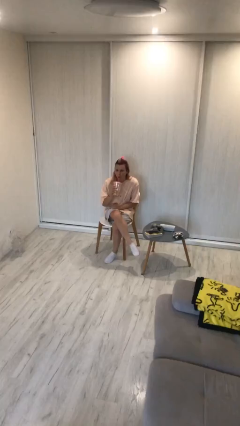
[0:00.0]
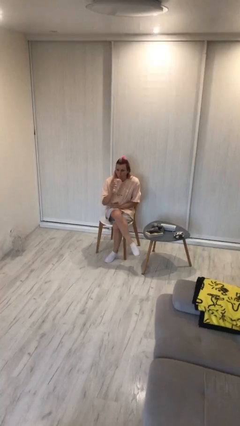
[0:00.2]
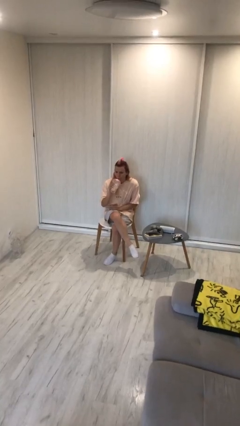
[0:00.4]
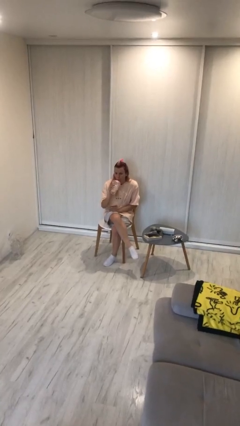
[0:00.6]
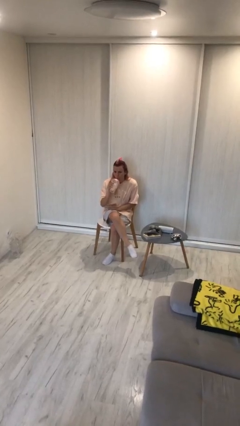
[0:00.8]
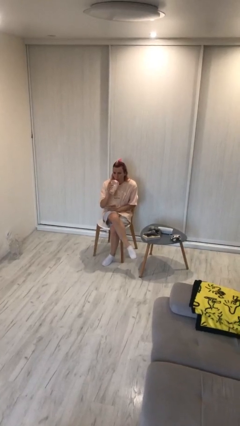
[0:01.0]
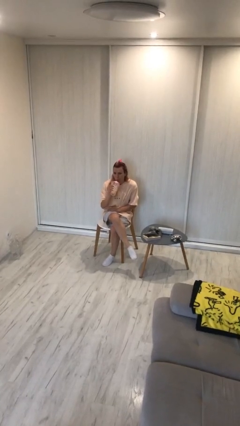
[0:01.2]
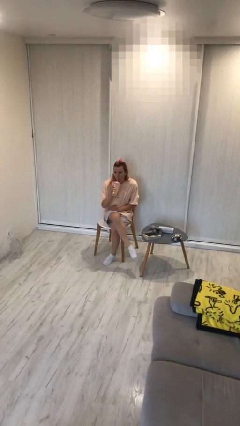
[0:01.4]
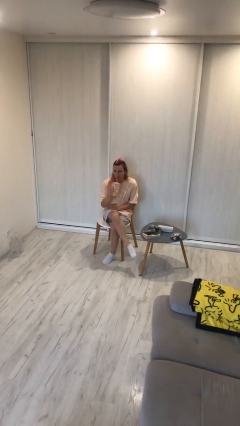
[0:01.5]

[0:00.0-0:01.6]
person drinks from straw

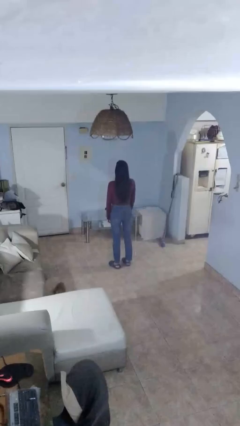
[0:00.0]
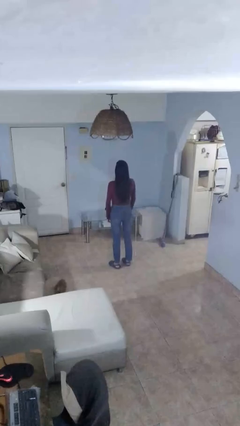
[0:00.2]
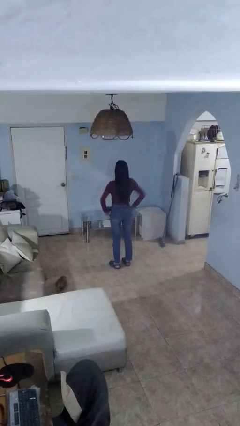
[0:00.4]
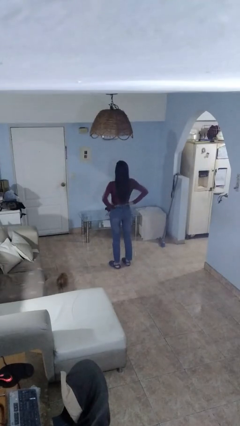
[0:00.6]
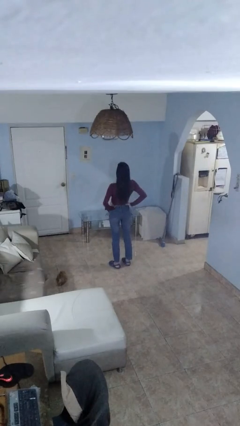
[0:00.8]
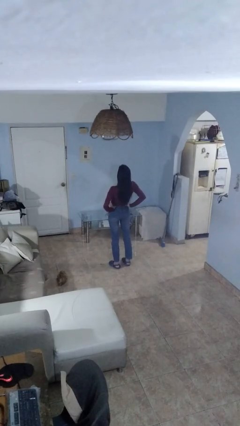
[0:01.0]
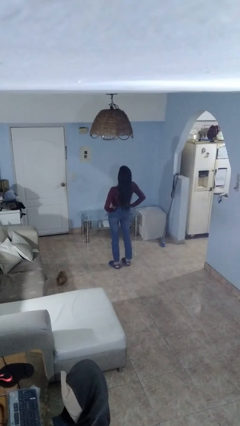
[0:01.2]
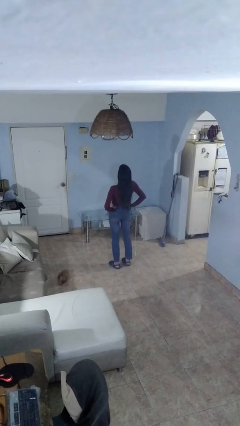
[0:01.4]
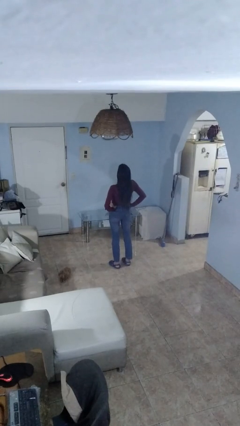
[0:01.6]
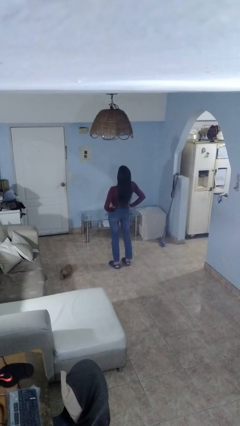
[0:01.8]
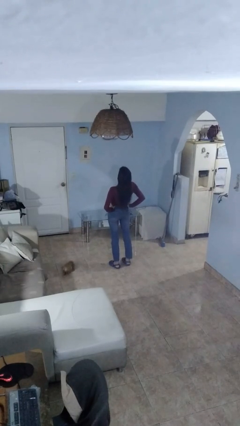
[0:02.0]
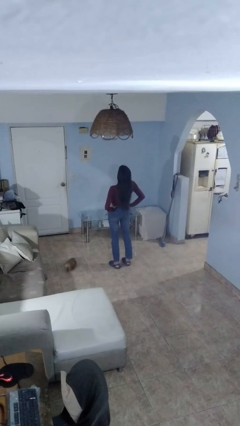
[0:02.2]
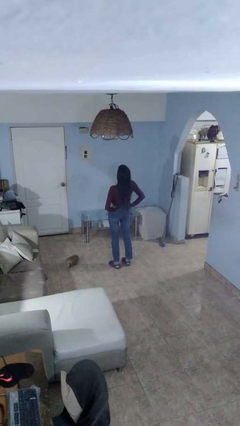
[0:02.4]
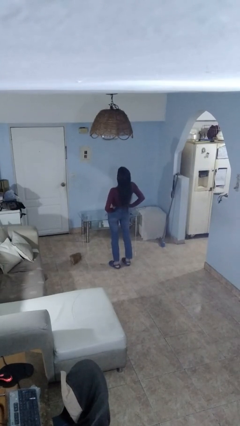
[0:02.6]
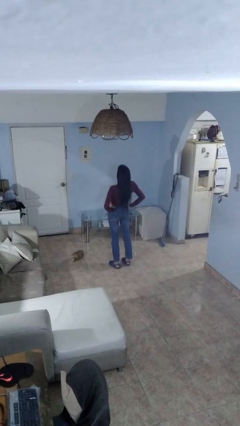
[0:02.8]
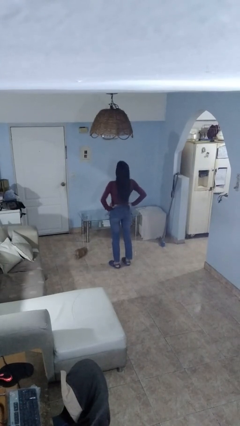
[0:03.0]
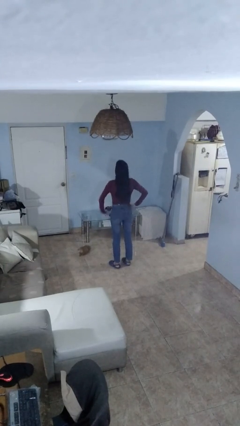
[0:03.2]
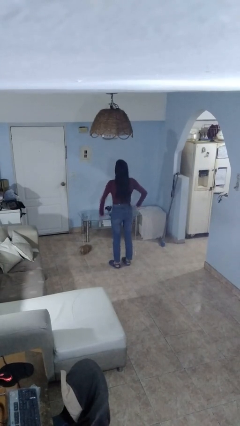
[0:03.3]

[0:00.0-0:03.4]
person stretches back

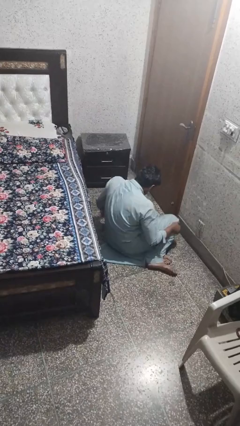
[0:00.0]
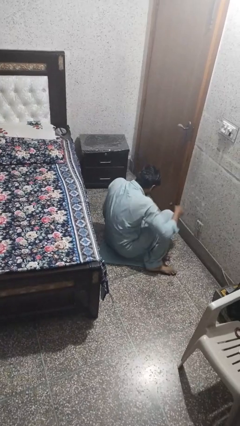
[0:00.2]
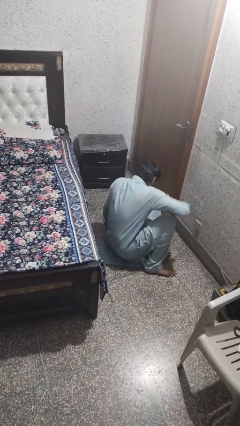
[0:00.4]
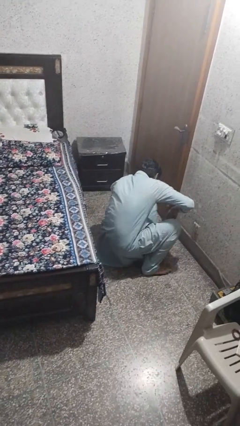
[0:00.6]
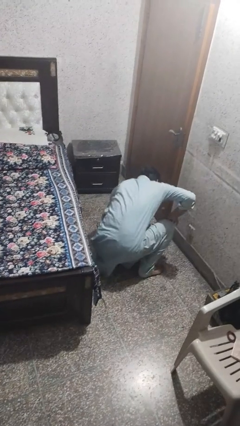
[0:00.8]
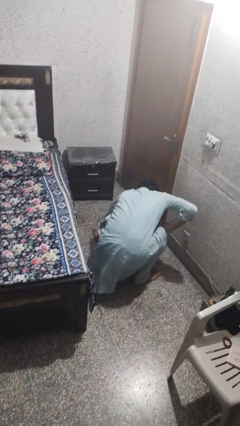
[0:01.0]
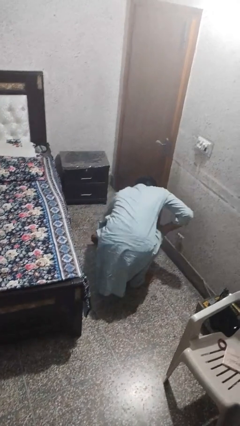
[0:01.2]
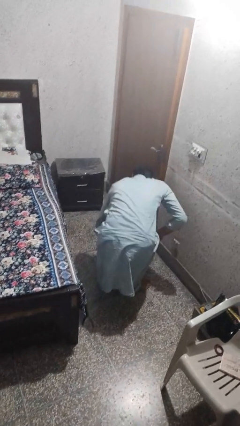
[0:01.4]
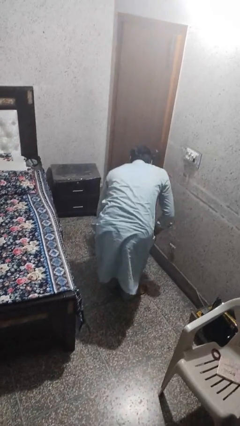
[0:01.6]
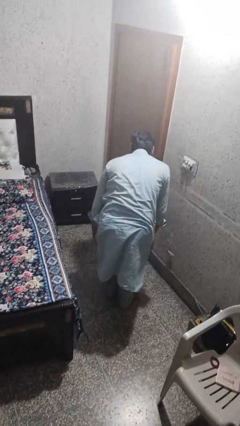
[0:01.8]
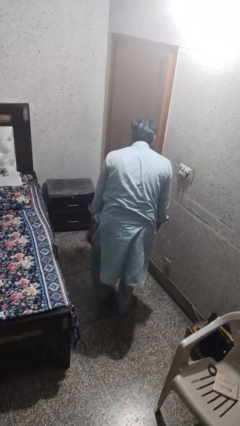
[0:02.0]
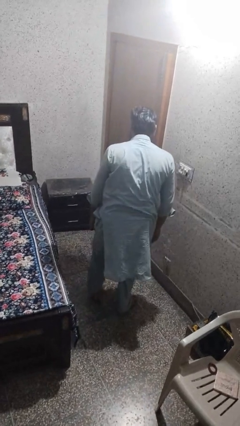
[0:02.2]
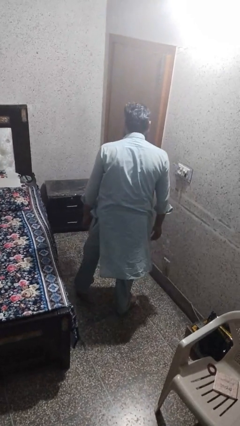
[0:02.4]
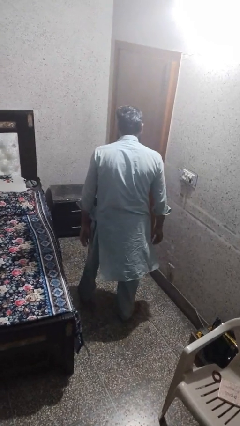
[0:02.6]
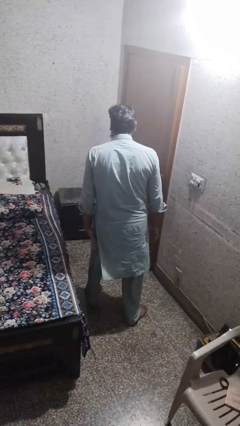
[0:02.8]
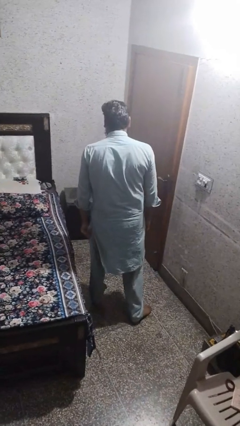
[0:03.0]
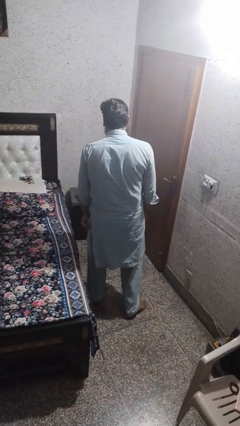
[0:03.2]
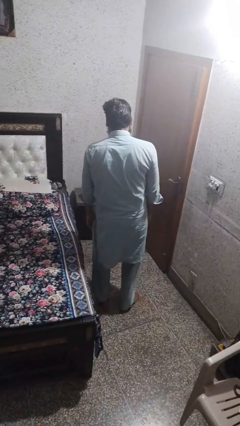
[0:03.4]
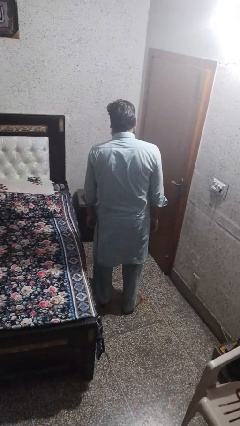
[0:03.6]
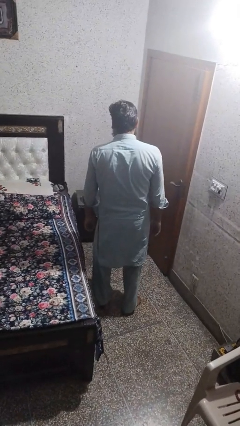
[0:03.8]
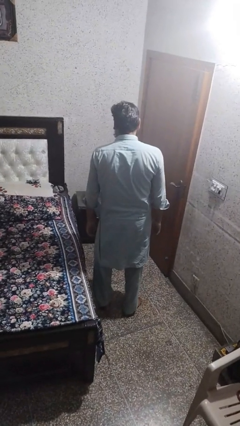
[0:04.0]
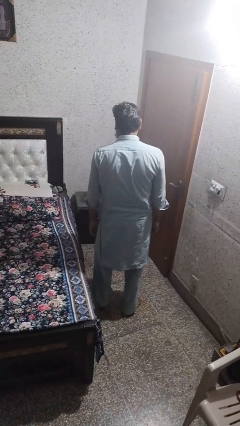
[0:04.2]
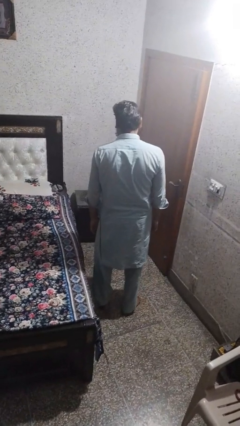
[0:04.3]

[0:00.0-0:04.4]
person stands up from floor

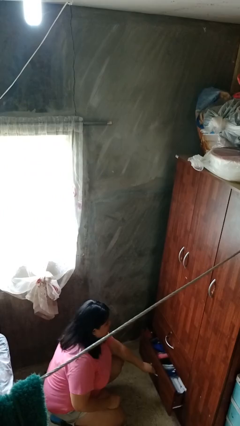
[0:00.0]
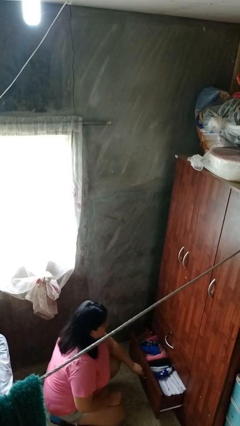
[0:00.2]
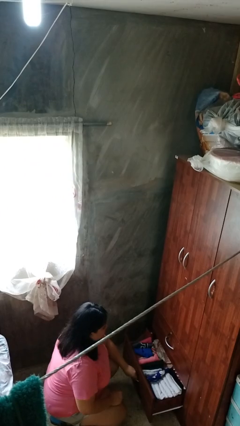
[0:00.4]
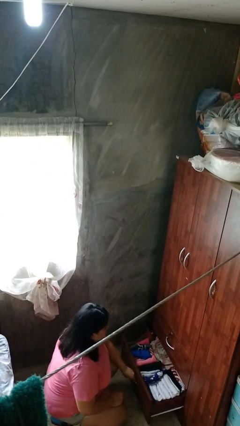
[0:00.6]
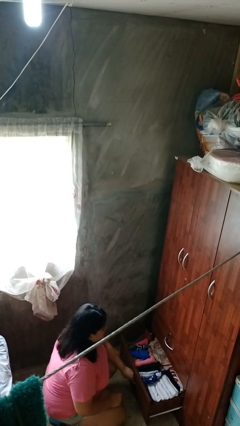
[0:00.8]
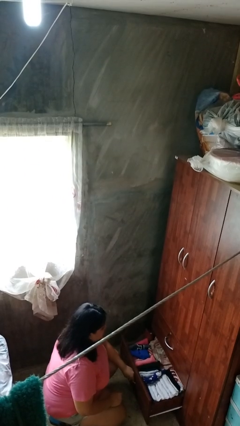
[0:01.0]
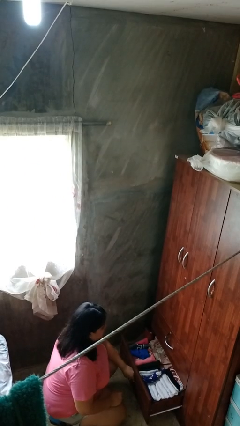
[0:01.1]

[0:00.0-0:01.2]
person opens dresser drawer

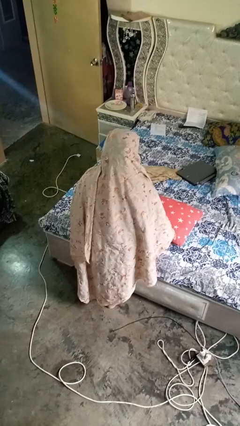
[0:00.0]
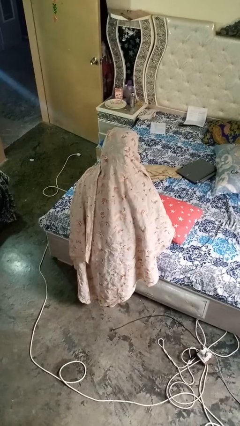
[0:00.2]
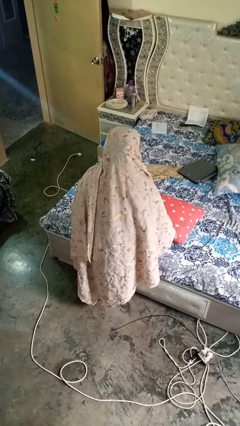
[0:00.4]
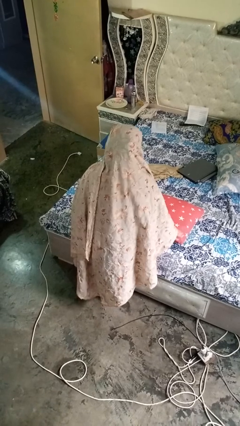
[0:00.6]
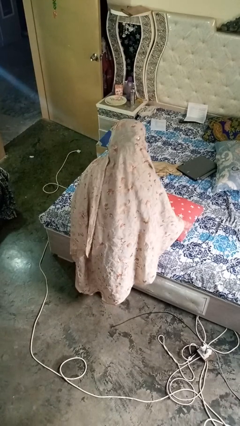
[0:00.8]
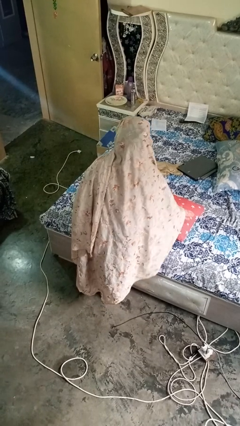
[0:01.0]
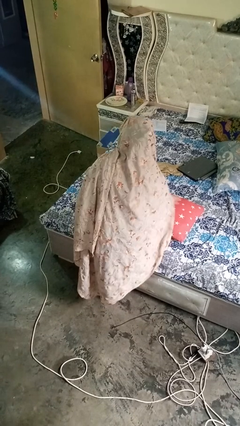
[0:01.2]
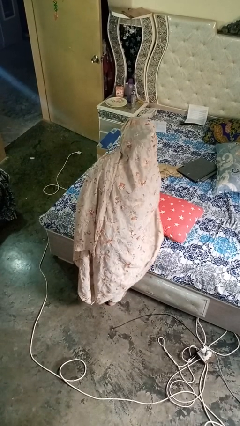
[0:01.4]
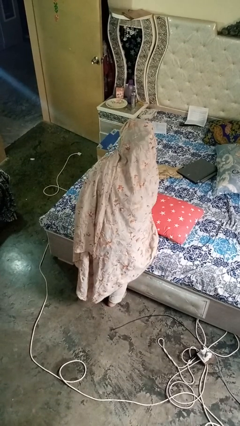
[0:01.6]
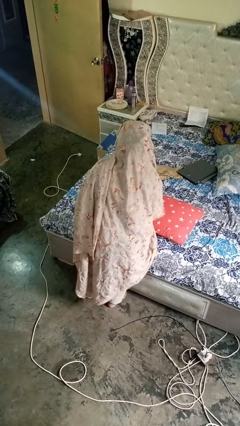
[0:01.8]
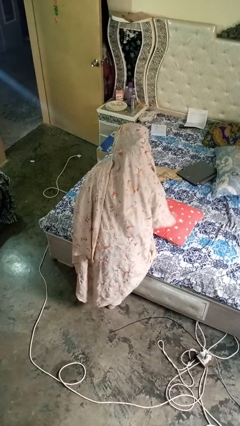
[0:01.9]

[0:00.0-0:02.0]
person waves hand over object

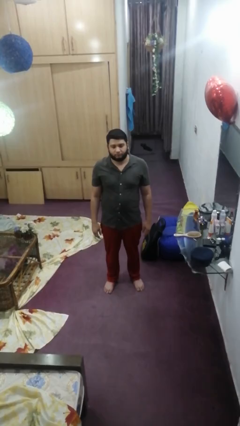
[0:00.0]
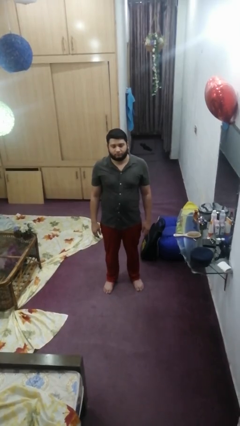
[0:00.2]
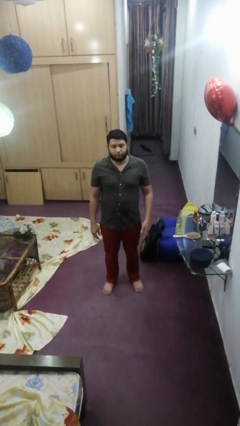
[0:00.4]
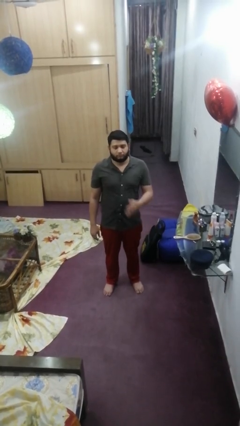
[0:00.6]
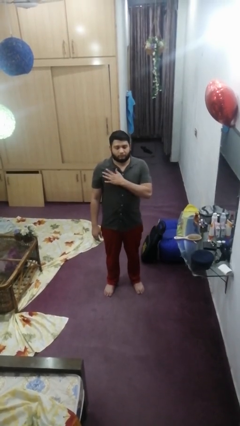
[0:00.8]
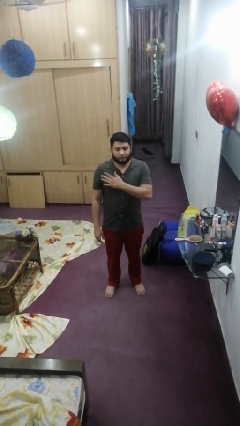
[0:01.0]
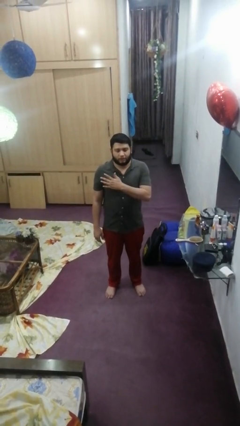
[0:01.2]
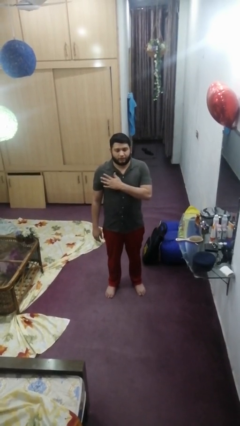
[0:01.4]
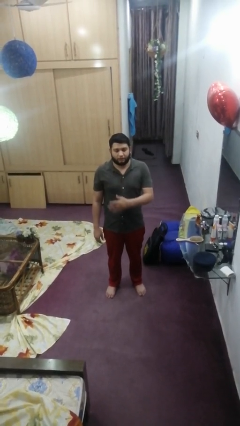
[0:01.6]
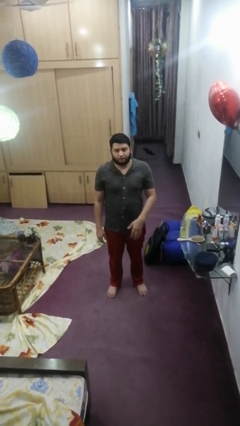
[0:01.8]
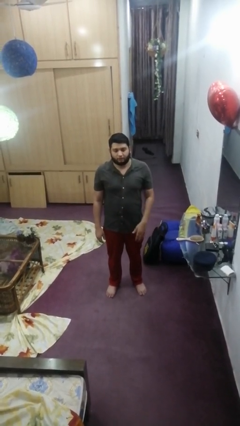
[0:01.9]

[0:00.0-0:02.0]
person drums on chest

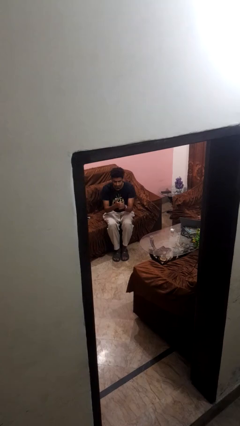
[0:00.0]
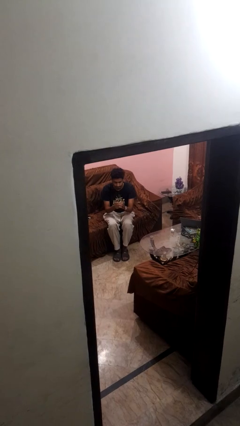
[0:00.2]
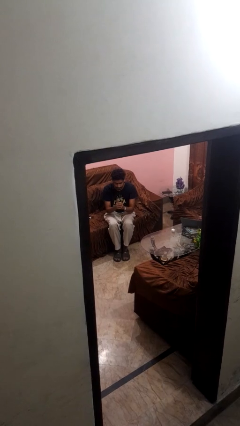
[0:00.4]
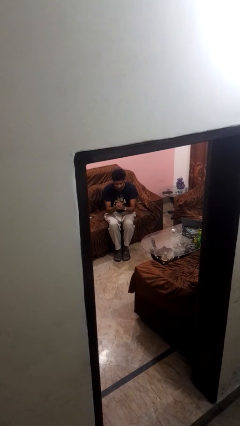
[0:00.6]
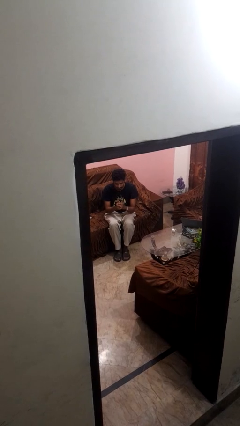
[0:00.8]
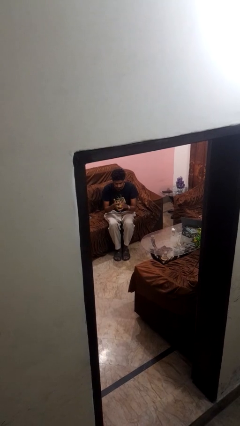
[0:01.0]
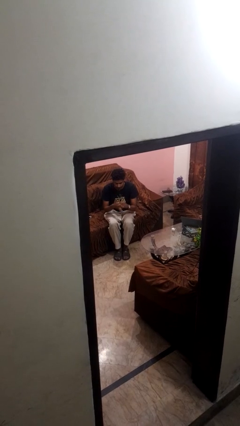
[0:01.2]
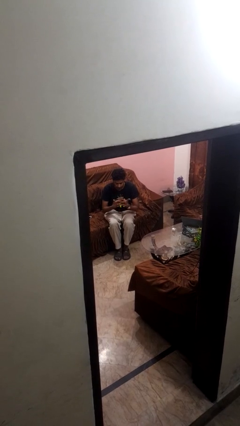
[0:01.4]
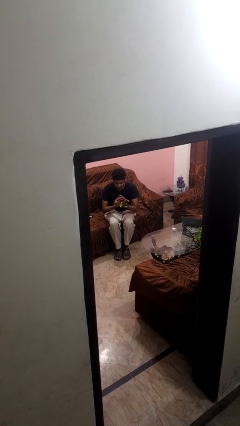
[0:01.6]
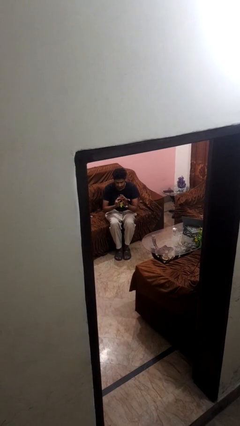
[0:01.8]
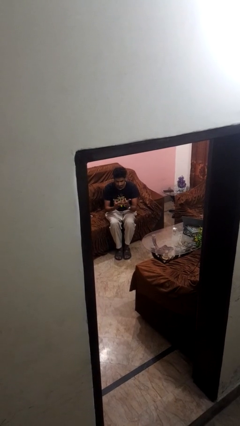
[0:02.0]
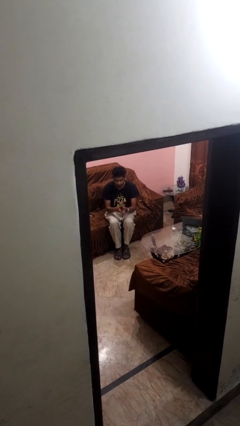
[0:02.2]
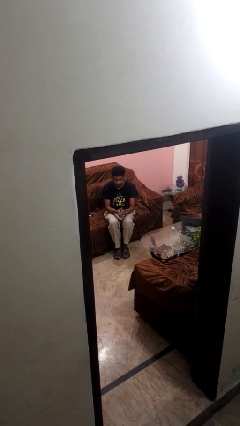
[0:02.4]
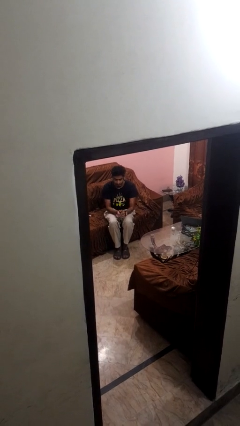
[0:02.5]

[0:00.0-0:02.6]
person cracks knuckles

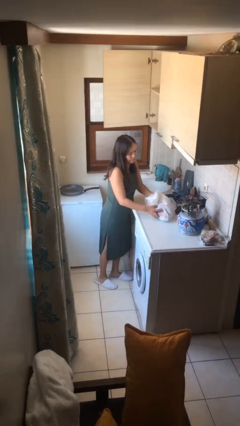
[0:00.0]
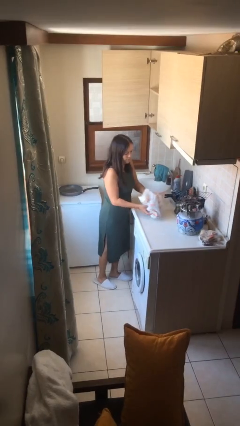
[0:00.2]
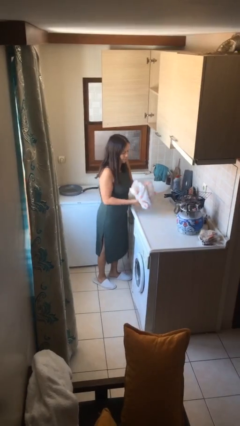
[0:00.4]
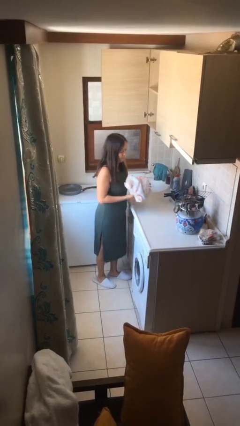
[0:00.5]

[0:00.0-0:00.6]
person picks up object from table
